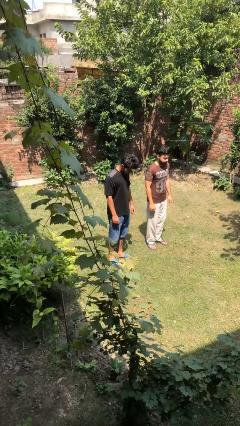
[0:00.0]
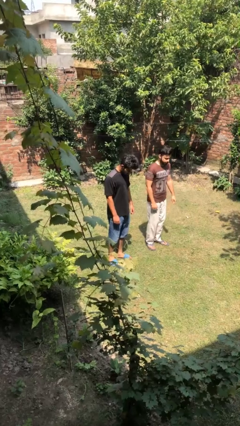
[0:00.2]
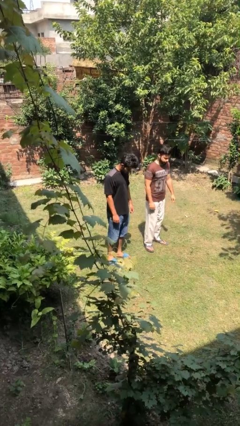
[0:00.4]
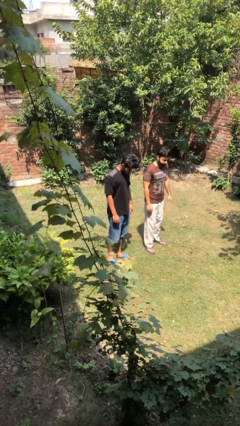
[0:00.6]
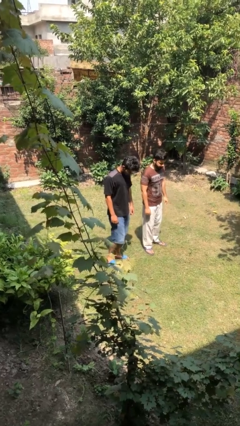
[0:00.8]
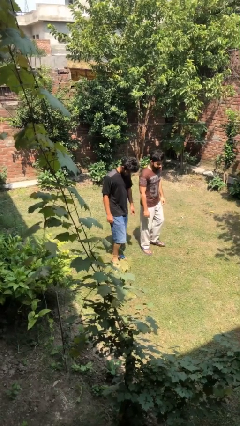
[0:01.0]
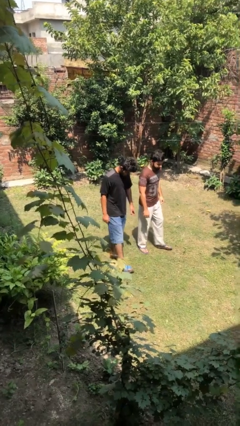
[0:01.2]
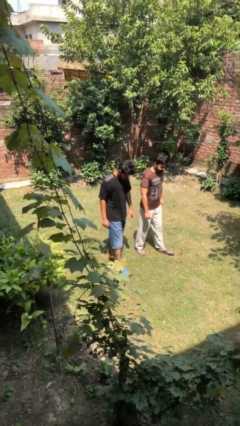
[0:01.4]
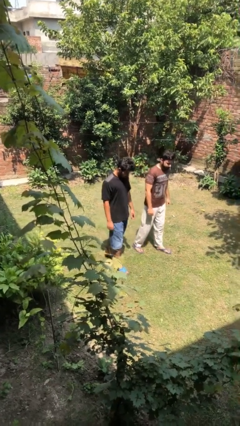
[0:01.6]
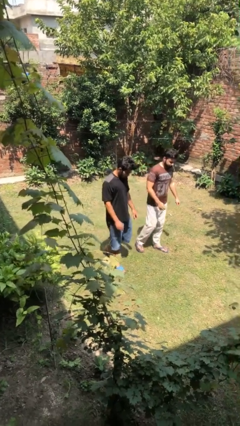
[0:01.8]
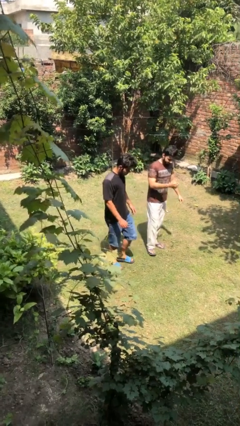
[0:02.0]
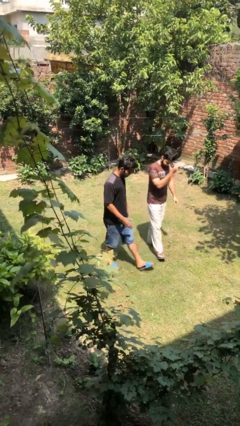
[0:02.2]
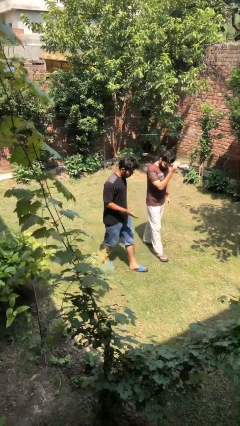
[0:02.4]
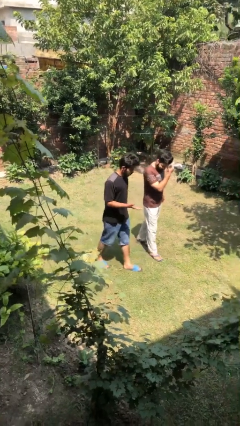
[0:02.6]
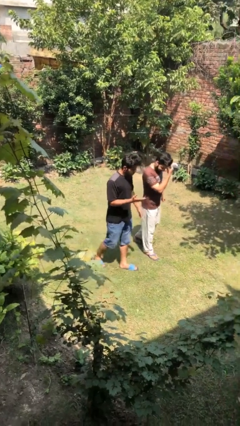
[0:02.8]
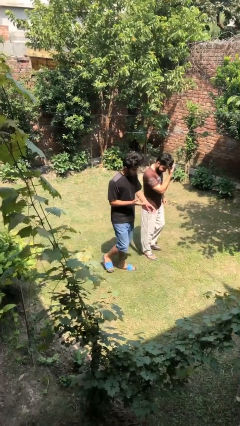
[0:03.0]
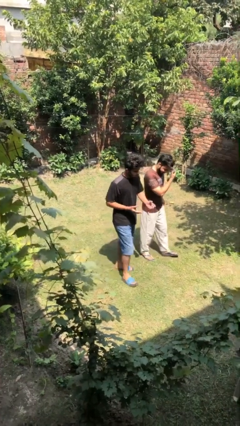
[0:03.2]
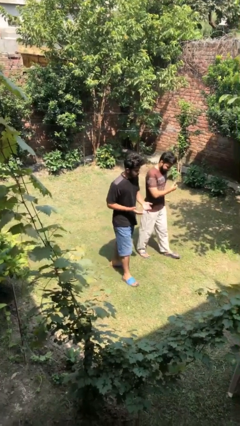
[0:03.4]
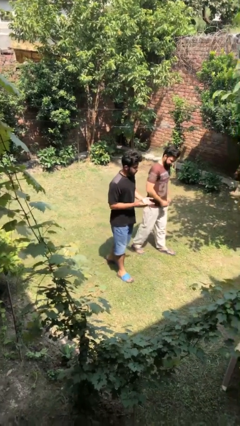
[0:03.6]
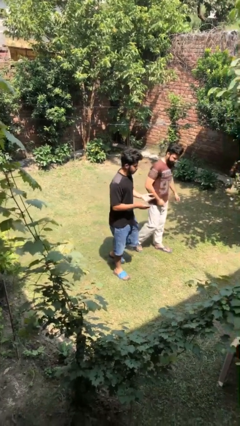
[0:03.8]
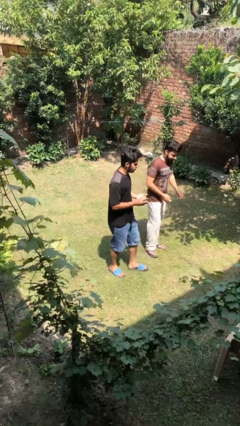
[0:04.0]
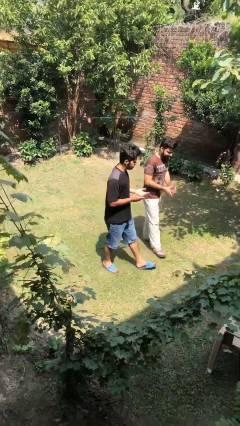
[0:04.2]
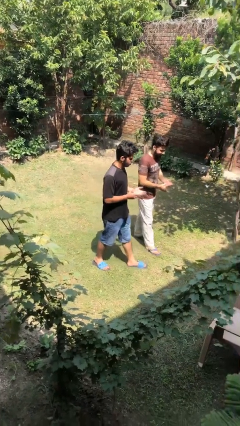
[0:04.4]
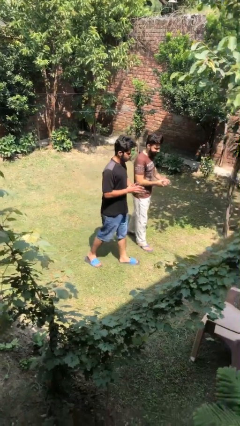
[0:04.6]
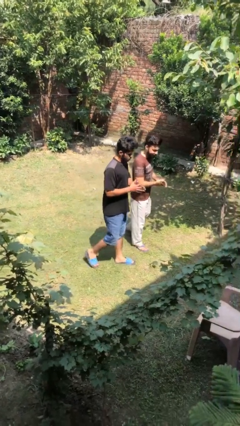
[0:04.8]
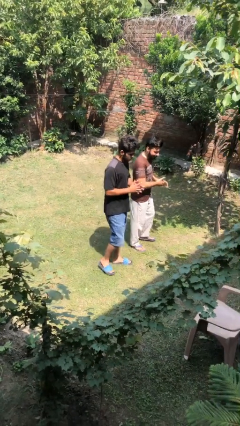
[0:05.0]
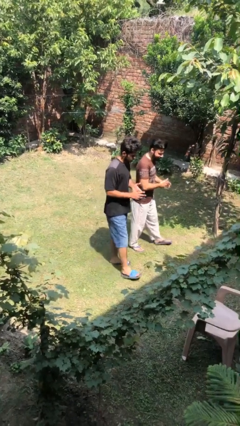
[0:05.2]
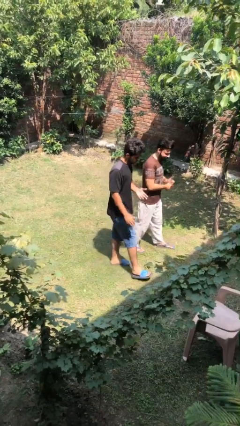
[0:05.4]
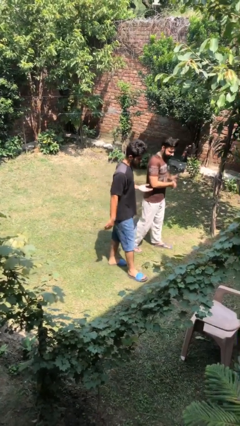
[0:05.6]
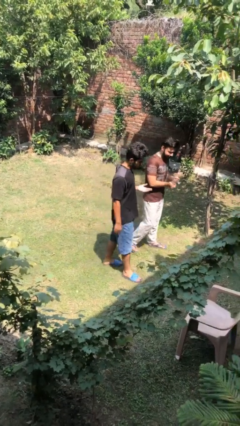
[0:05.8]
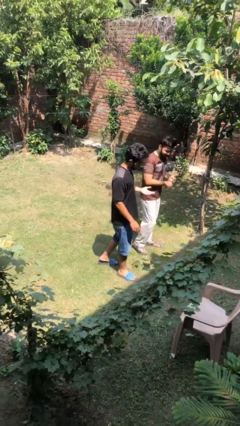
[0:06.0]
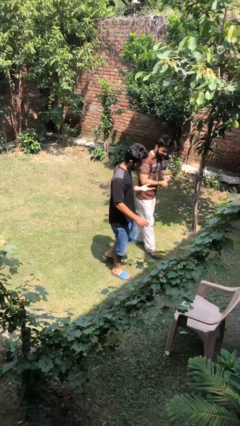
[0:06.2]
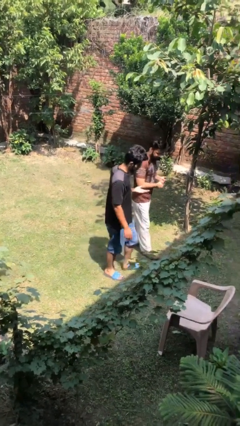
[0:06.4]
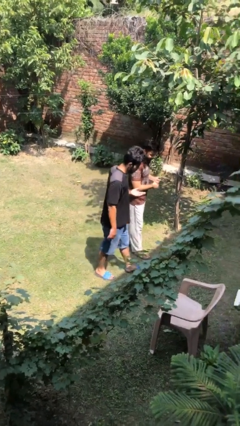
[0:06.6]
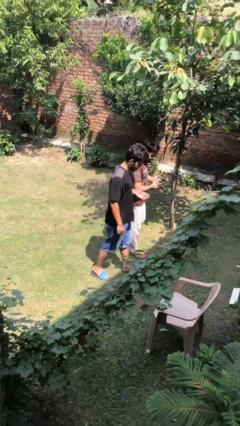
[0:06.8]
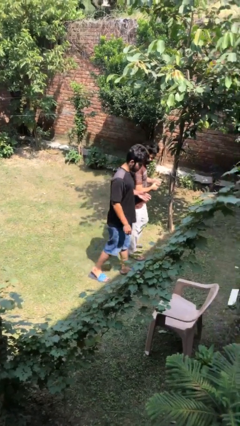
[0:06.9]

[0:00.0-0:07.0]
person talks to person

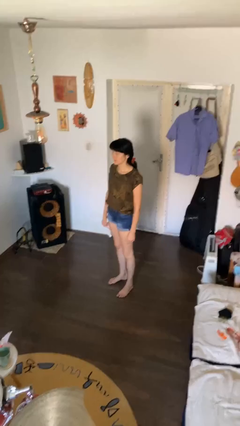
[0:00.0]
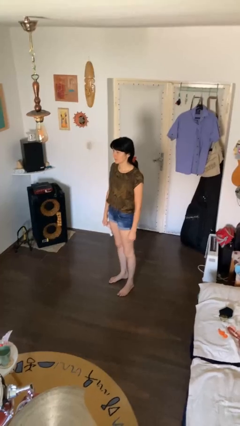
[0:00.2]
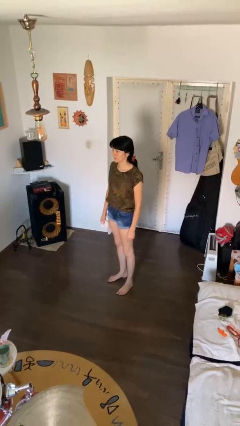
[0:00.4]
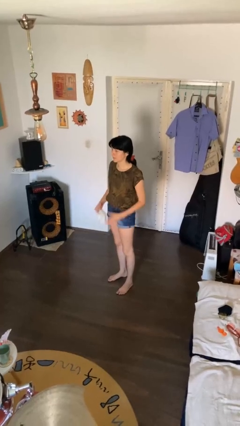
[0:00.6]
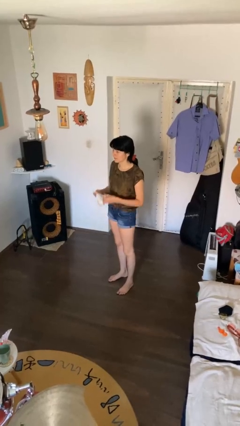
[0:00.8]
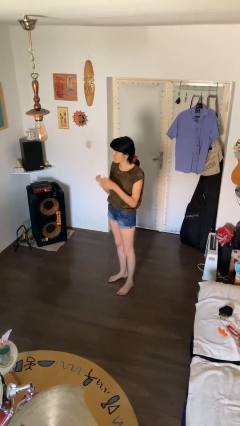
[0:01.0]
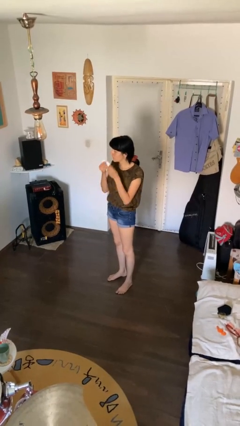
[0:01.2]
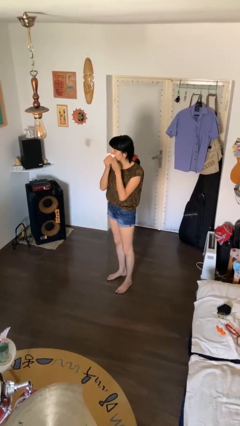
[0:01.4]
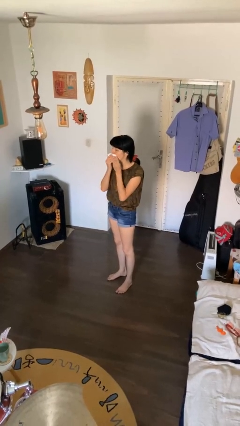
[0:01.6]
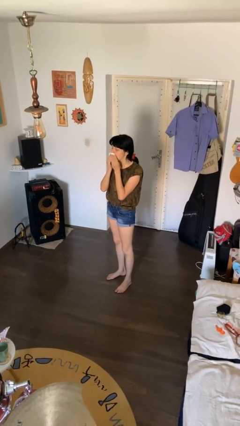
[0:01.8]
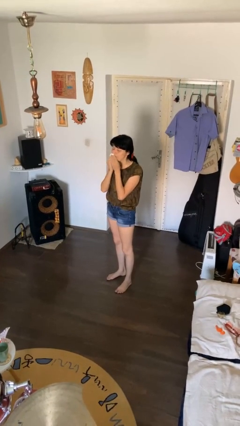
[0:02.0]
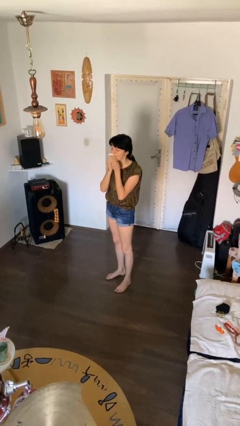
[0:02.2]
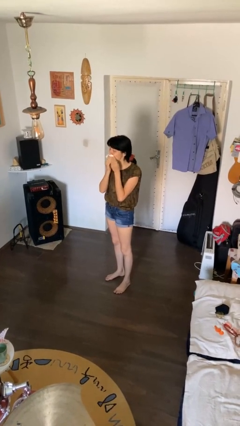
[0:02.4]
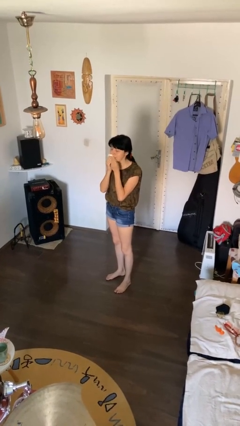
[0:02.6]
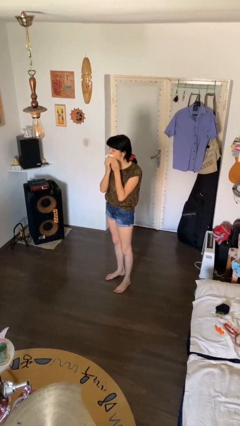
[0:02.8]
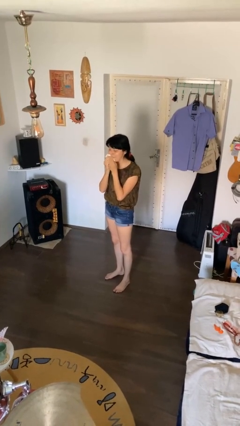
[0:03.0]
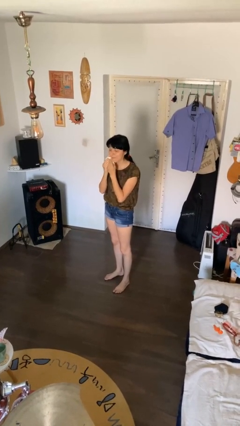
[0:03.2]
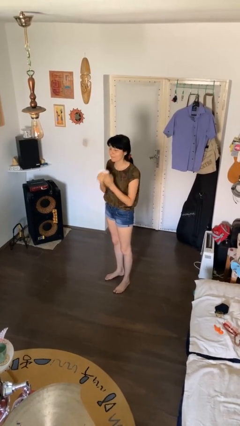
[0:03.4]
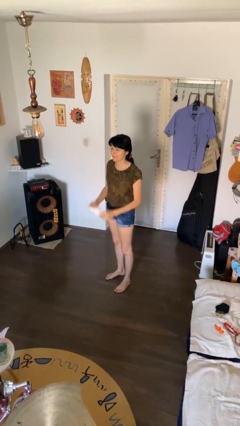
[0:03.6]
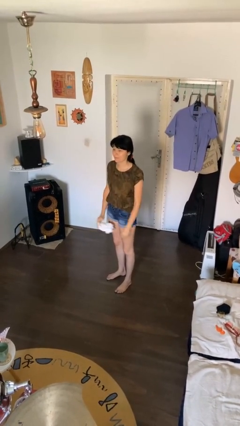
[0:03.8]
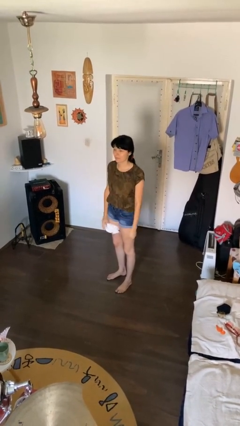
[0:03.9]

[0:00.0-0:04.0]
person wipes mouth with napkin

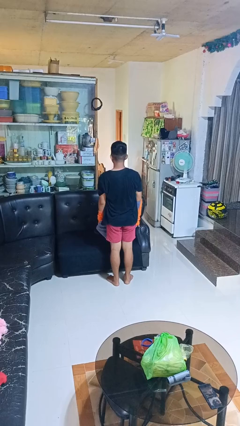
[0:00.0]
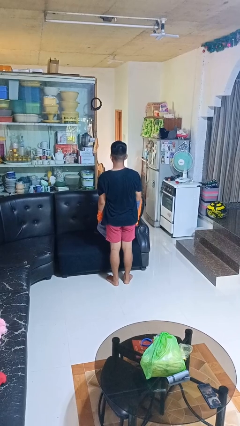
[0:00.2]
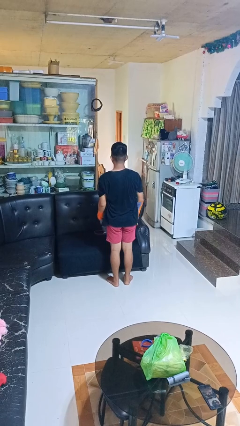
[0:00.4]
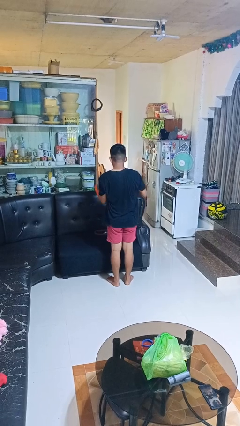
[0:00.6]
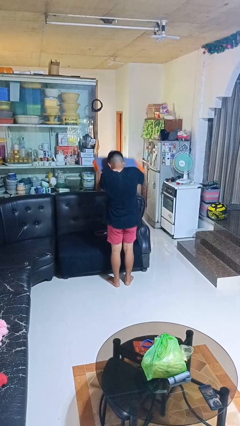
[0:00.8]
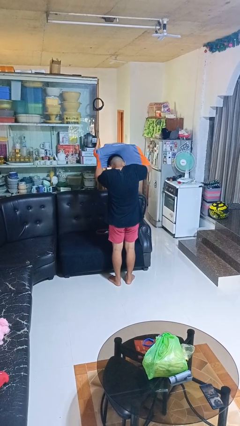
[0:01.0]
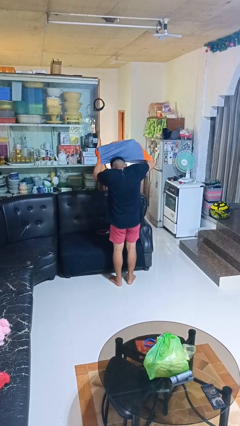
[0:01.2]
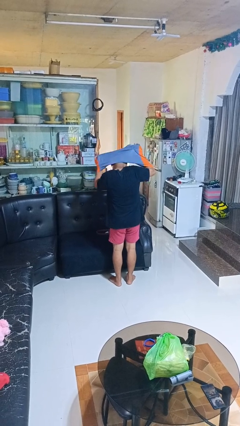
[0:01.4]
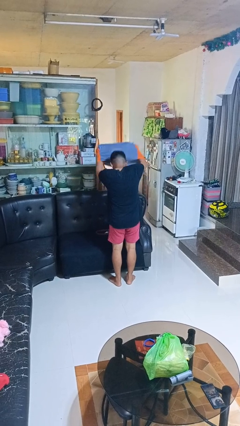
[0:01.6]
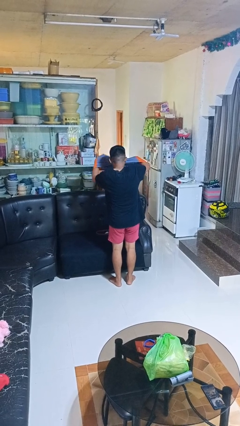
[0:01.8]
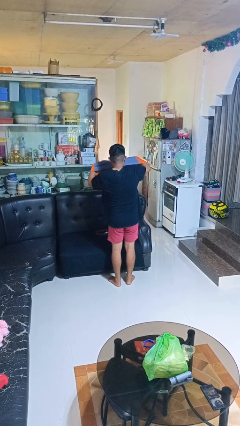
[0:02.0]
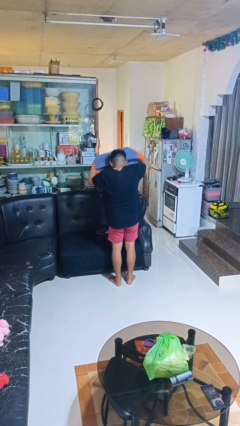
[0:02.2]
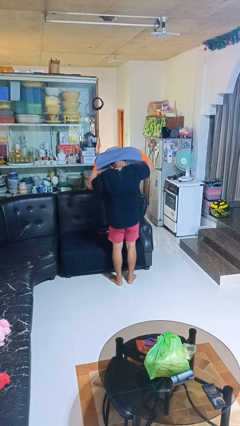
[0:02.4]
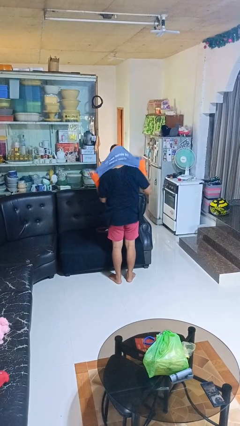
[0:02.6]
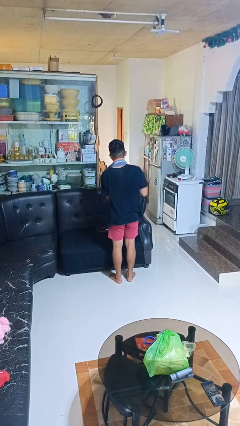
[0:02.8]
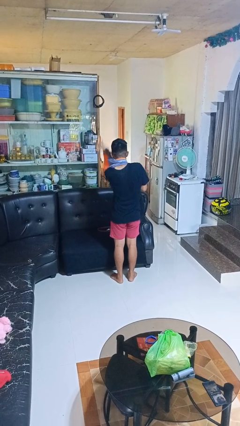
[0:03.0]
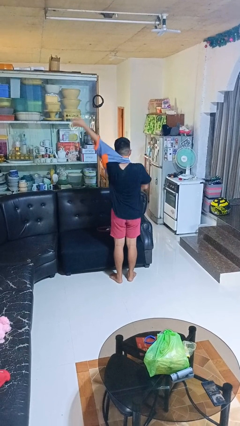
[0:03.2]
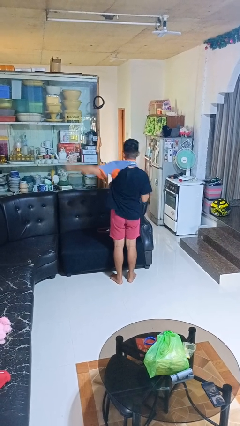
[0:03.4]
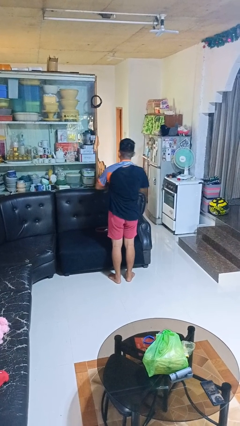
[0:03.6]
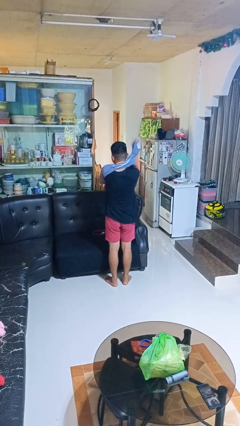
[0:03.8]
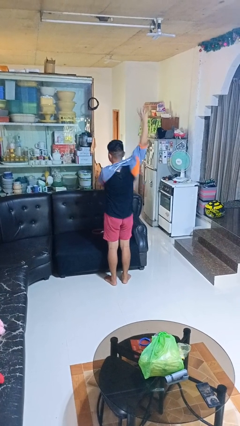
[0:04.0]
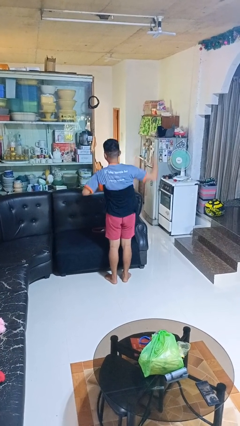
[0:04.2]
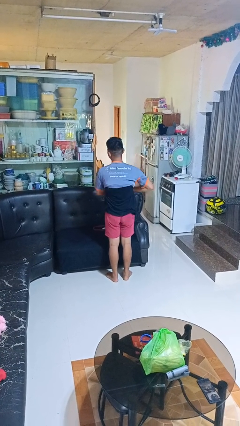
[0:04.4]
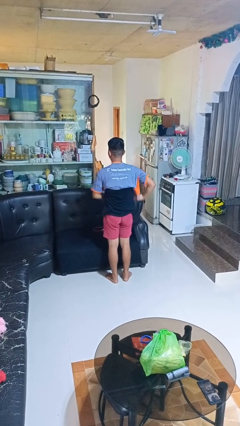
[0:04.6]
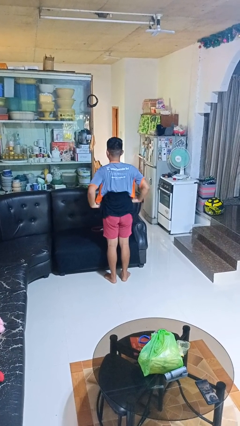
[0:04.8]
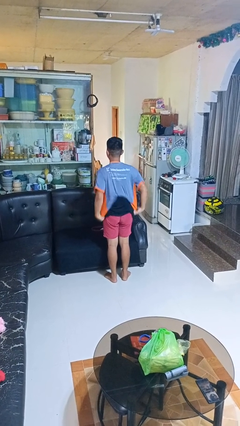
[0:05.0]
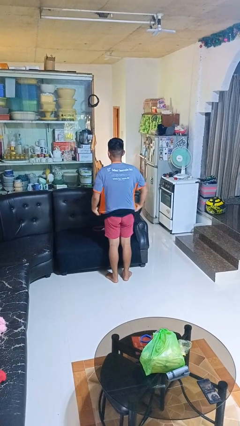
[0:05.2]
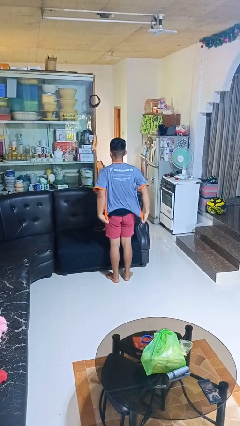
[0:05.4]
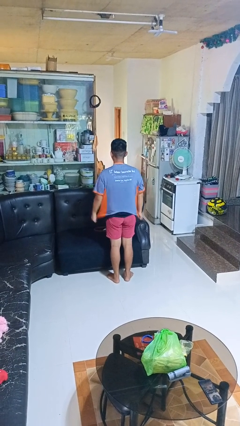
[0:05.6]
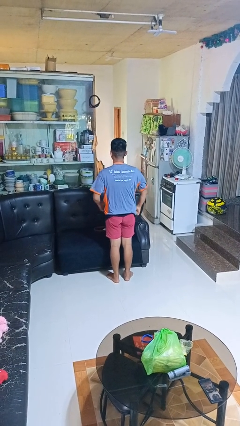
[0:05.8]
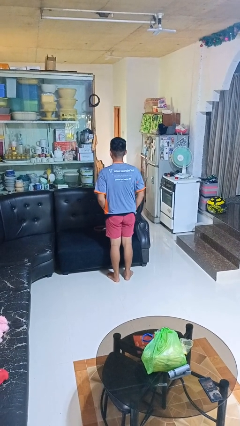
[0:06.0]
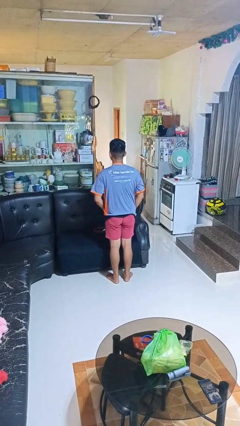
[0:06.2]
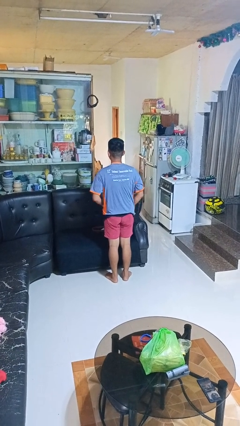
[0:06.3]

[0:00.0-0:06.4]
person puts on shirt

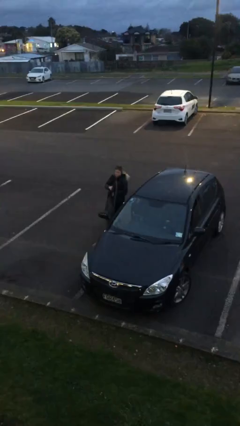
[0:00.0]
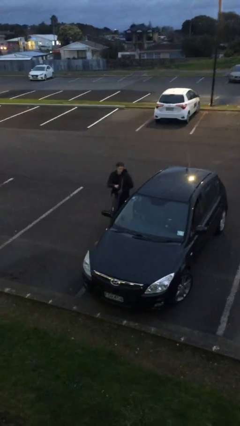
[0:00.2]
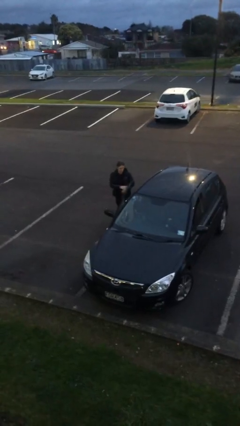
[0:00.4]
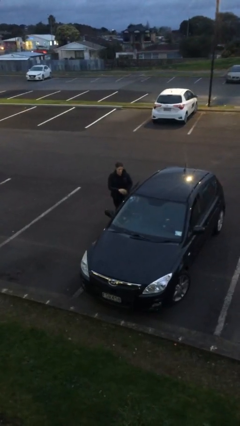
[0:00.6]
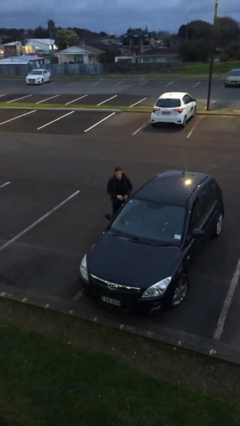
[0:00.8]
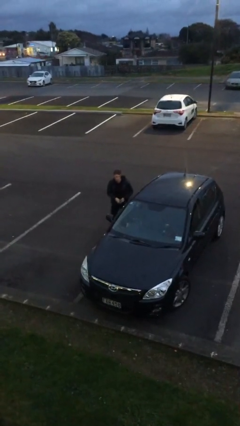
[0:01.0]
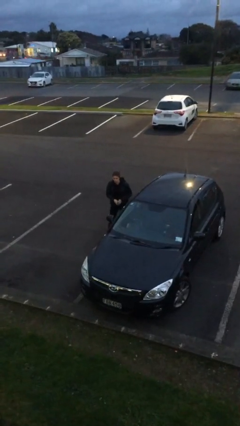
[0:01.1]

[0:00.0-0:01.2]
person closes car door
